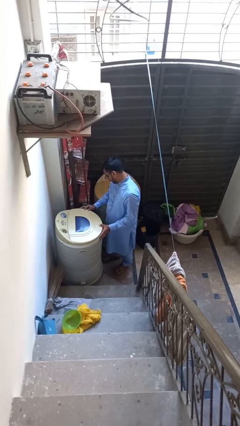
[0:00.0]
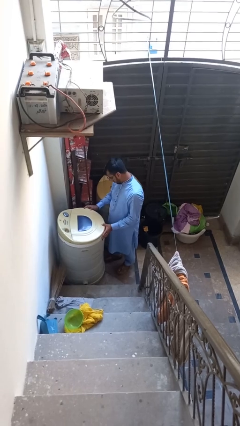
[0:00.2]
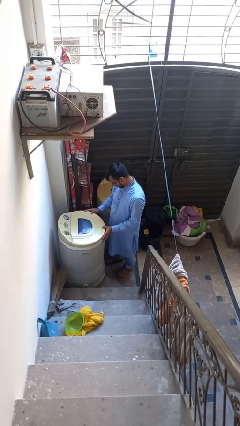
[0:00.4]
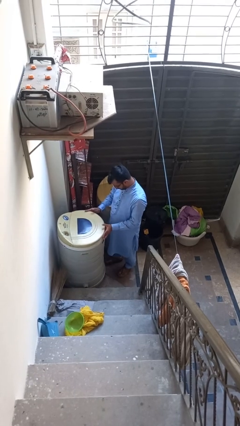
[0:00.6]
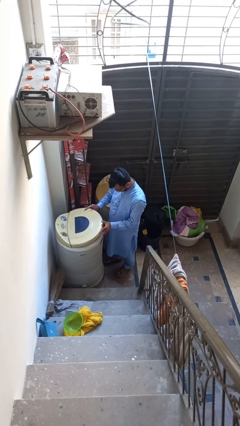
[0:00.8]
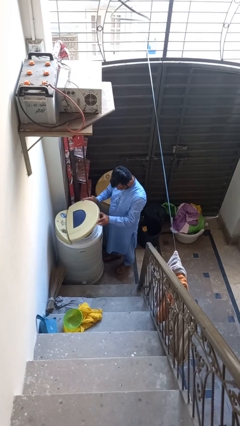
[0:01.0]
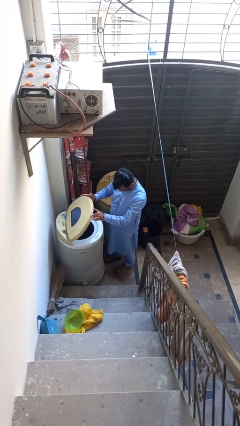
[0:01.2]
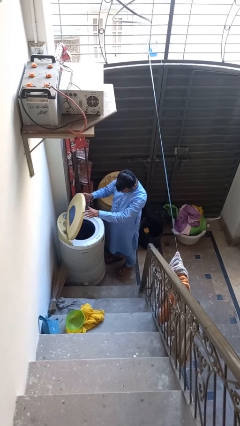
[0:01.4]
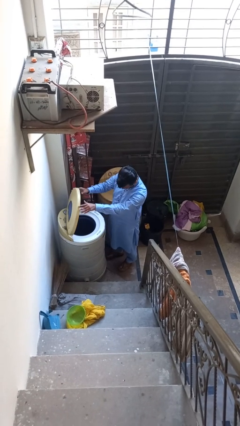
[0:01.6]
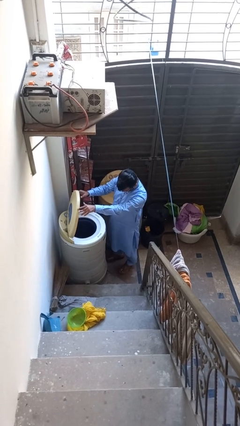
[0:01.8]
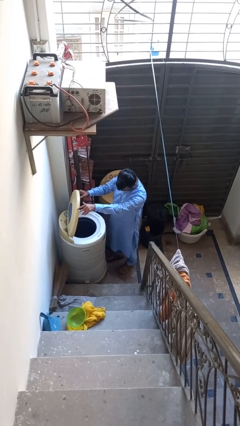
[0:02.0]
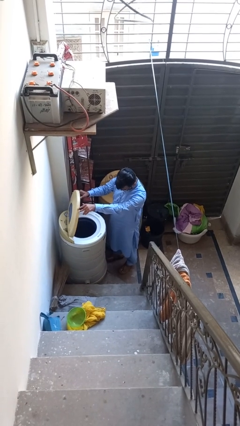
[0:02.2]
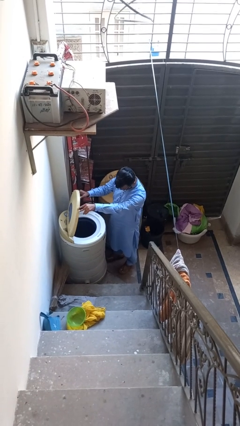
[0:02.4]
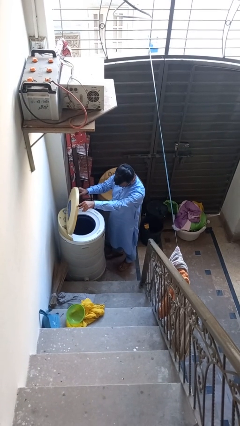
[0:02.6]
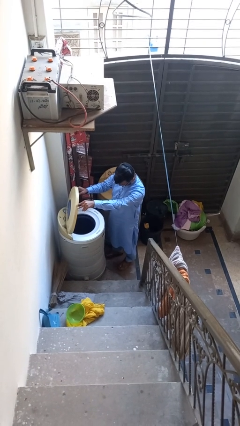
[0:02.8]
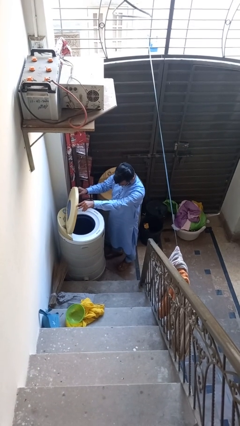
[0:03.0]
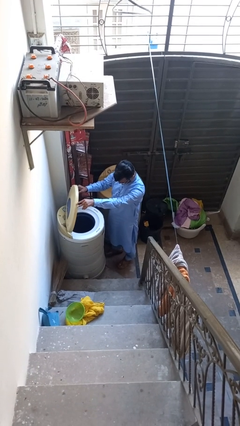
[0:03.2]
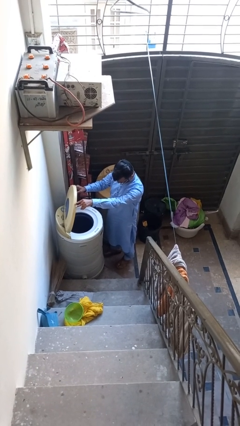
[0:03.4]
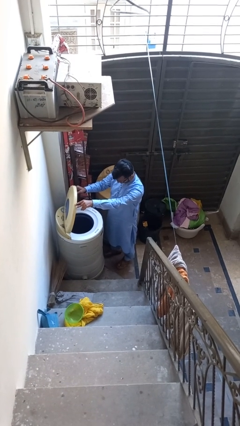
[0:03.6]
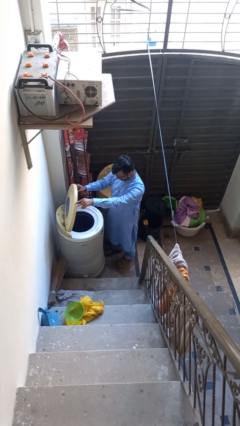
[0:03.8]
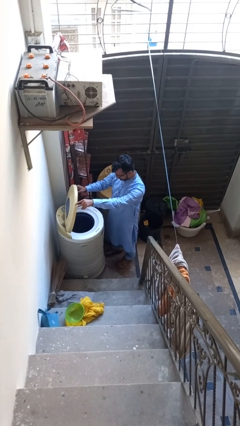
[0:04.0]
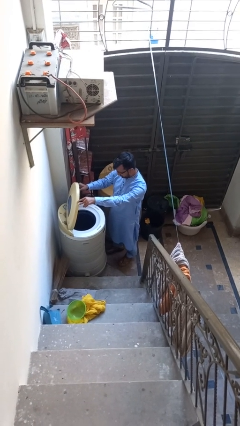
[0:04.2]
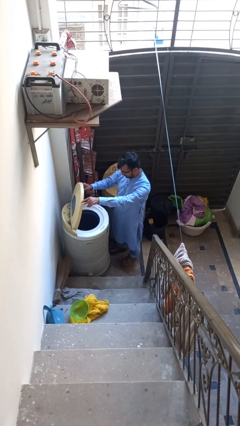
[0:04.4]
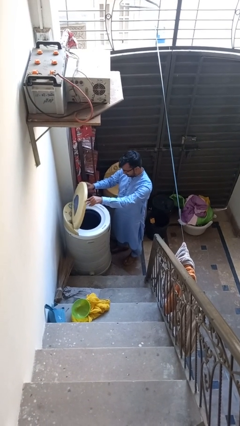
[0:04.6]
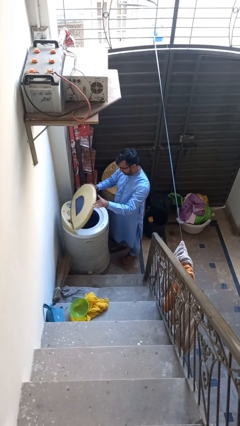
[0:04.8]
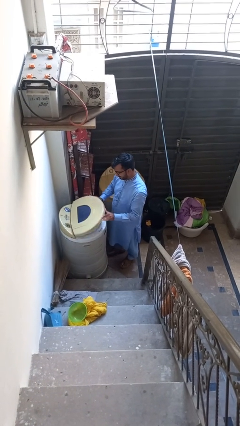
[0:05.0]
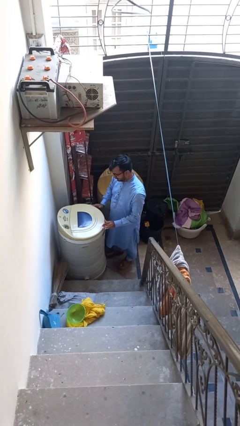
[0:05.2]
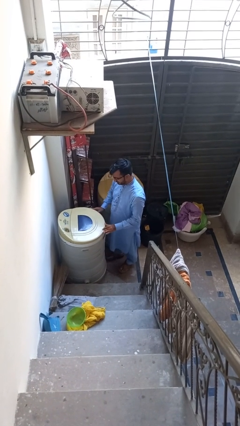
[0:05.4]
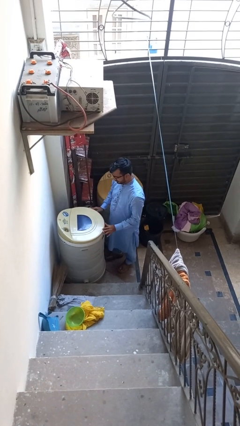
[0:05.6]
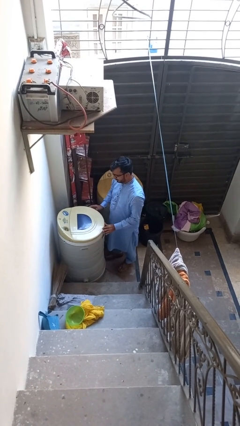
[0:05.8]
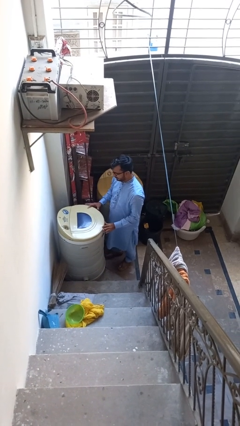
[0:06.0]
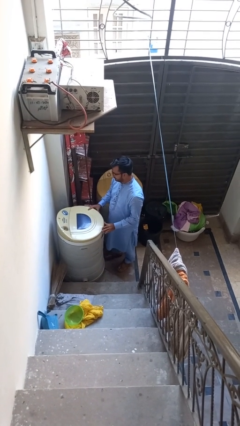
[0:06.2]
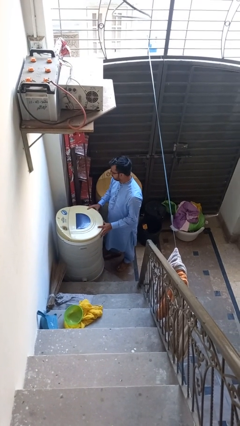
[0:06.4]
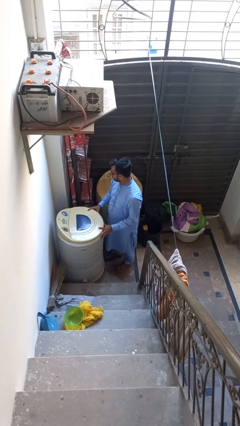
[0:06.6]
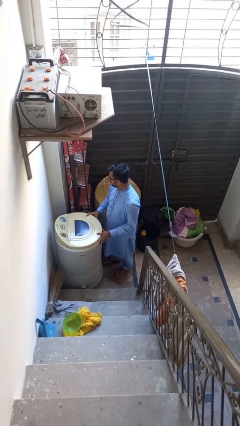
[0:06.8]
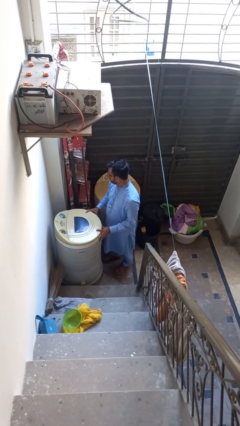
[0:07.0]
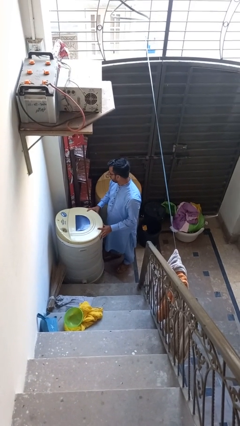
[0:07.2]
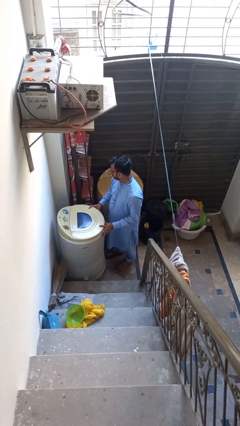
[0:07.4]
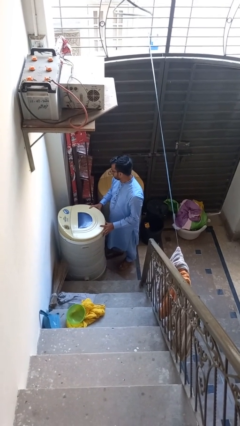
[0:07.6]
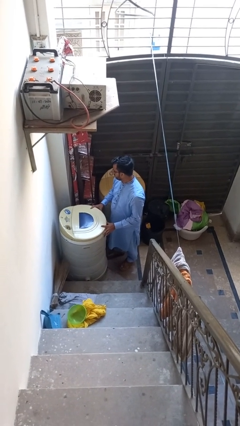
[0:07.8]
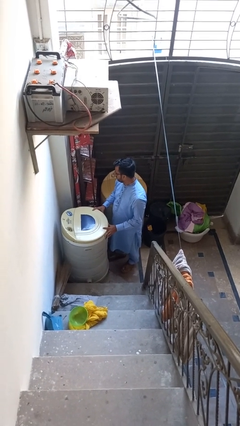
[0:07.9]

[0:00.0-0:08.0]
person opens clothes washer

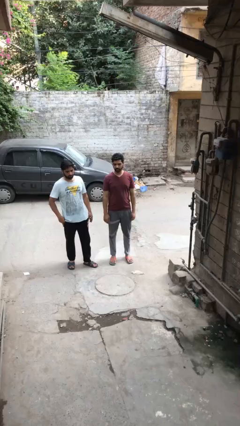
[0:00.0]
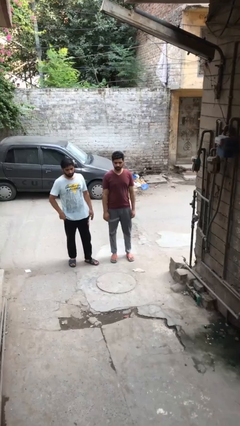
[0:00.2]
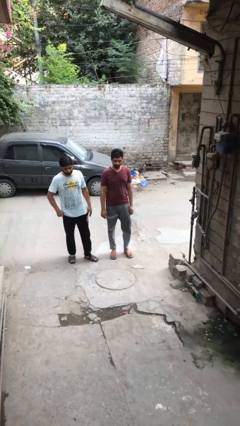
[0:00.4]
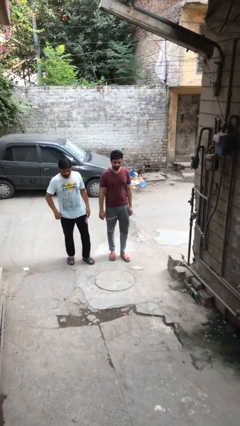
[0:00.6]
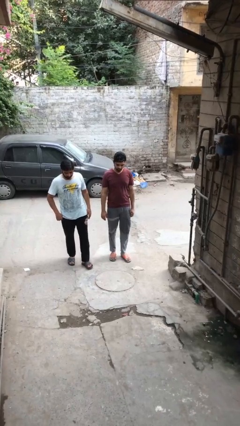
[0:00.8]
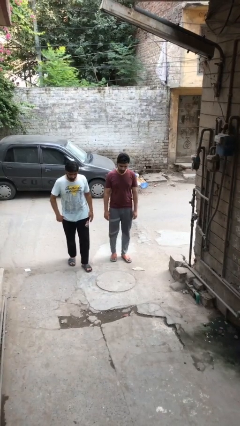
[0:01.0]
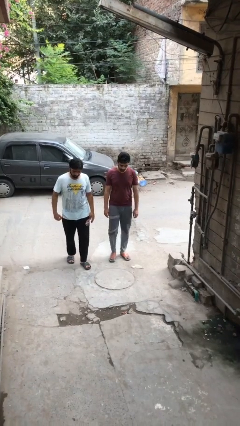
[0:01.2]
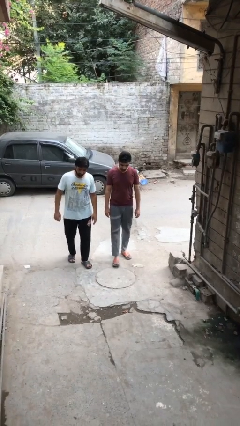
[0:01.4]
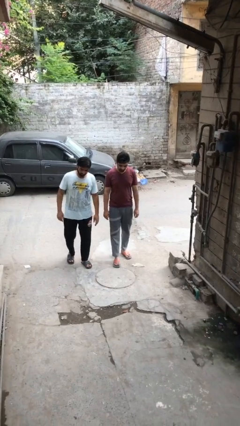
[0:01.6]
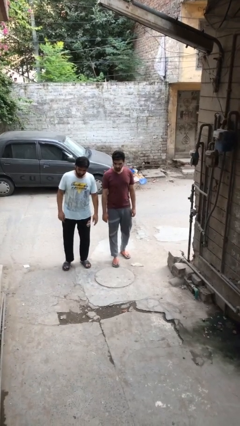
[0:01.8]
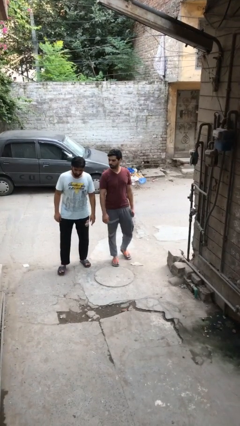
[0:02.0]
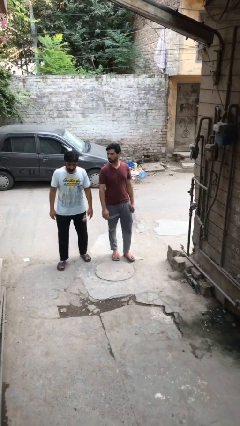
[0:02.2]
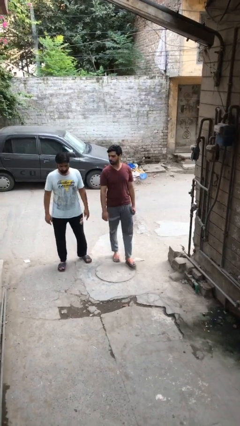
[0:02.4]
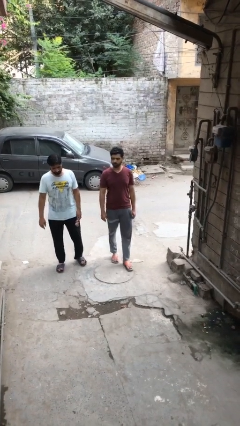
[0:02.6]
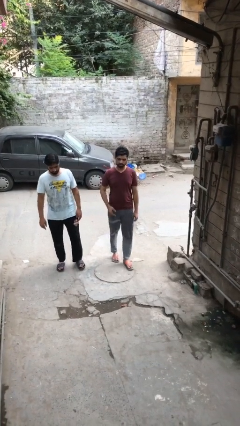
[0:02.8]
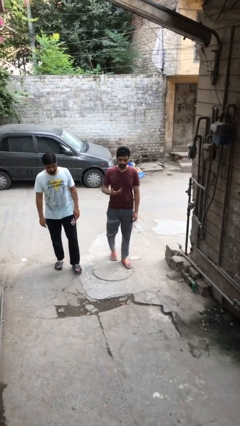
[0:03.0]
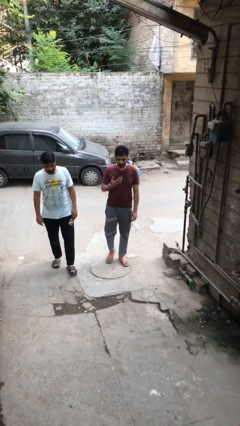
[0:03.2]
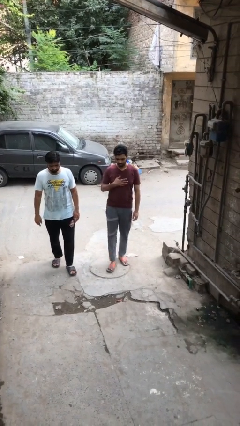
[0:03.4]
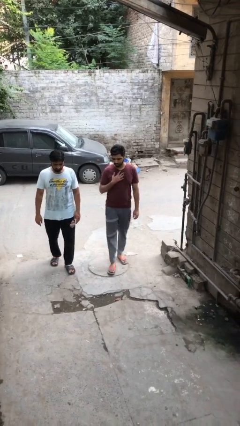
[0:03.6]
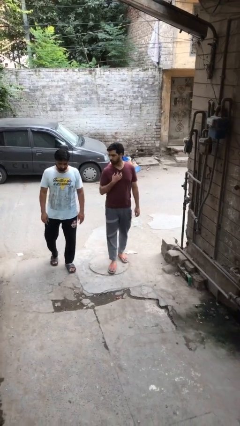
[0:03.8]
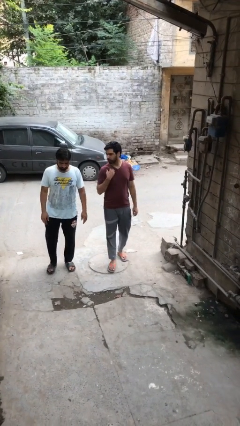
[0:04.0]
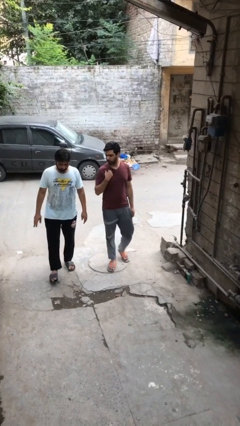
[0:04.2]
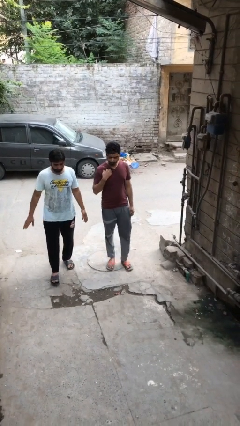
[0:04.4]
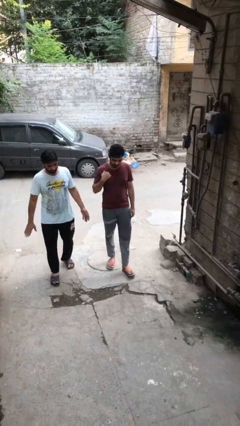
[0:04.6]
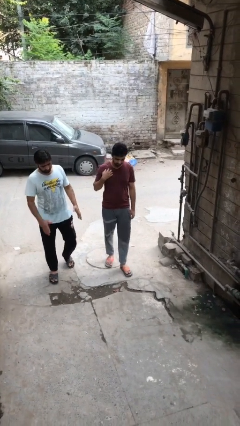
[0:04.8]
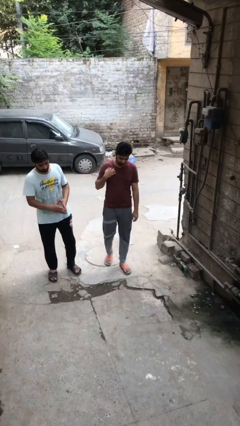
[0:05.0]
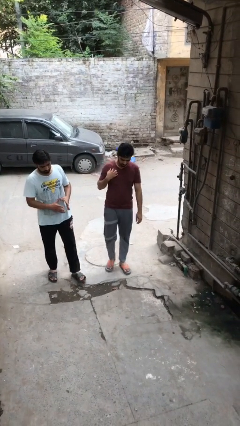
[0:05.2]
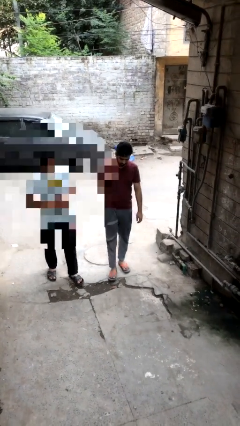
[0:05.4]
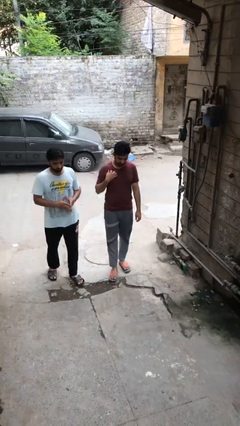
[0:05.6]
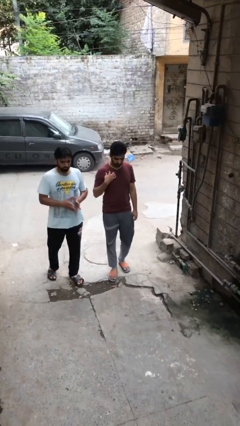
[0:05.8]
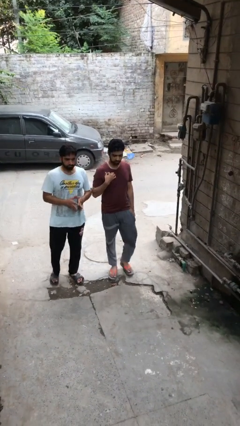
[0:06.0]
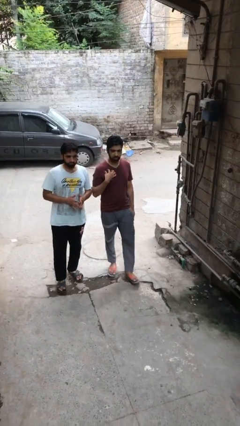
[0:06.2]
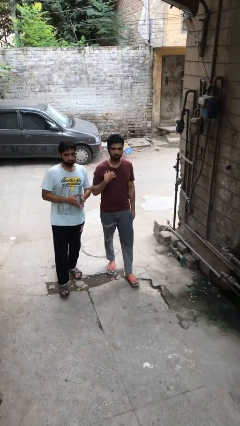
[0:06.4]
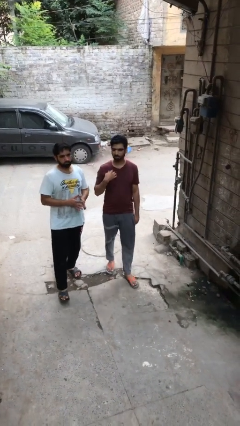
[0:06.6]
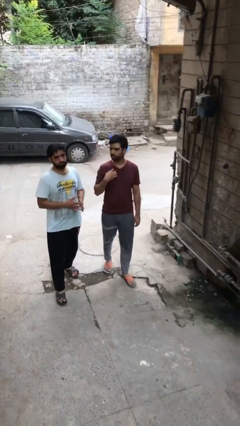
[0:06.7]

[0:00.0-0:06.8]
person talks to person

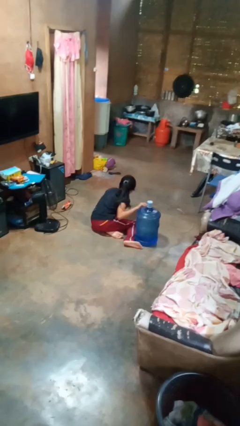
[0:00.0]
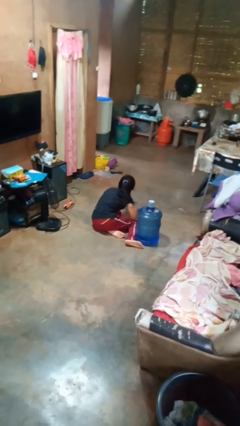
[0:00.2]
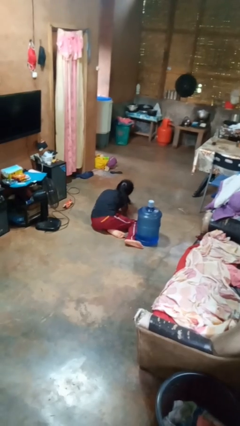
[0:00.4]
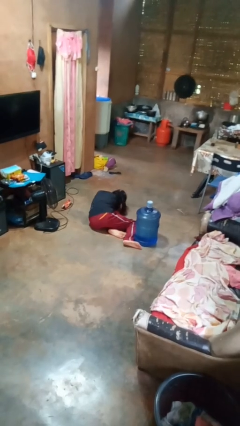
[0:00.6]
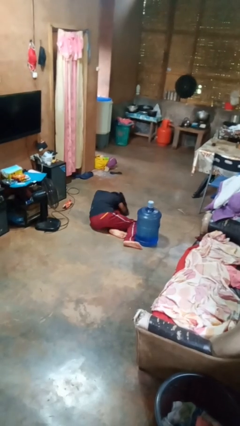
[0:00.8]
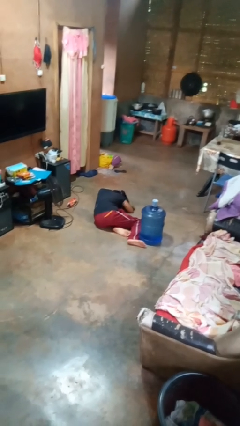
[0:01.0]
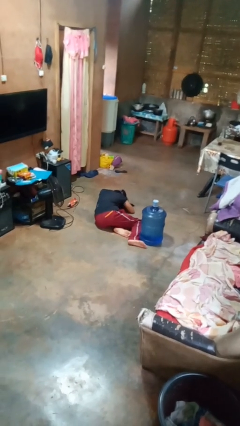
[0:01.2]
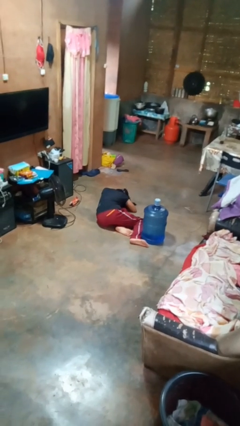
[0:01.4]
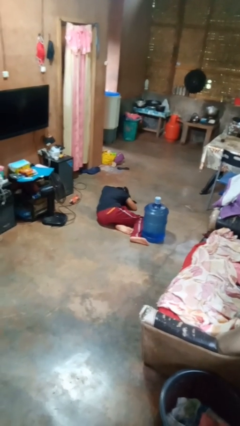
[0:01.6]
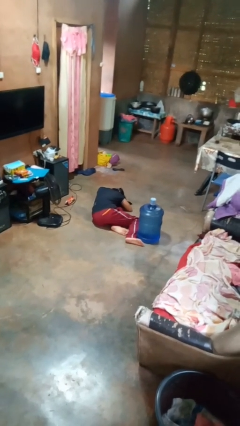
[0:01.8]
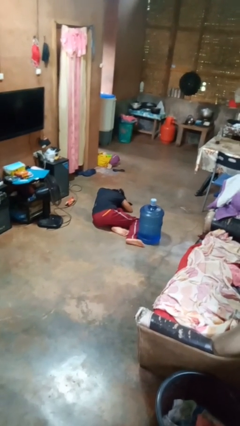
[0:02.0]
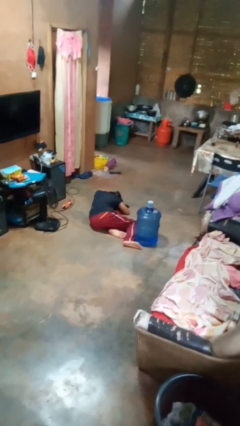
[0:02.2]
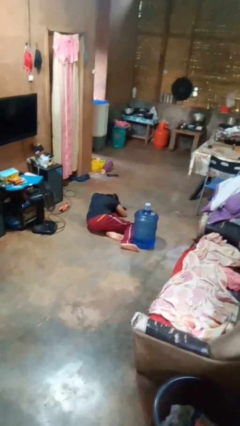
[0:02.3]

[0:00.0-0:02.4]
person lies down on floor

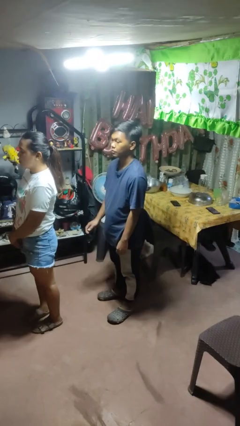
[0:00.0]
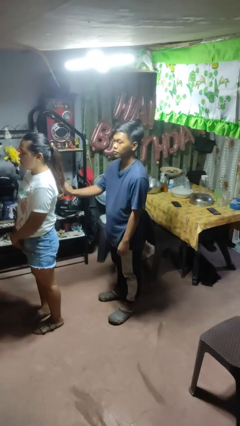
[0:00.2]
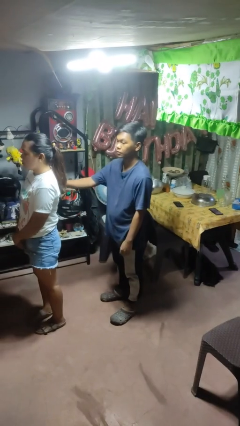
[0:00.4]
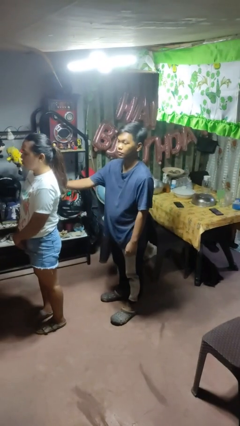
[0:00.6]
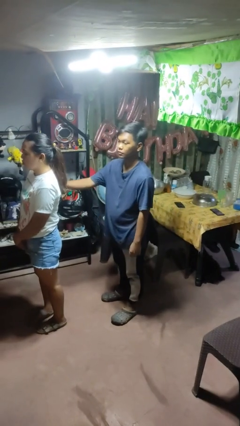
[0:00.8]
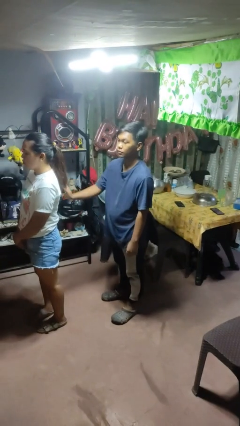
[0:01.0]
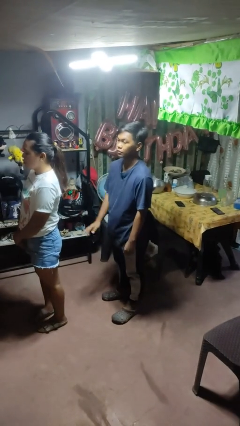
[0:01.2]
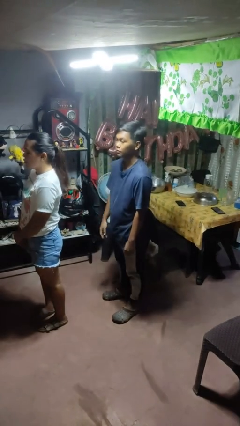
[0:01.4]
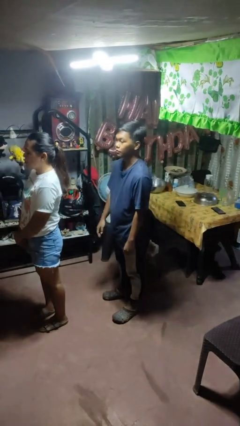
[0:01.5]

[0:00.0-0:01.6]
person touches back of person
